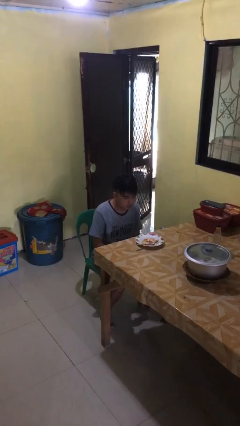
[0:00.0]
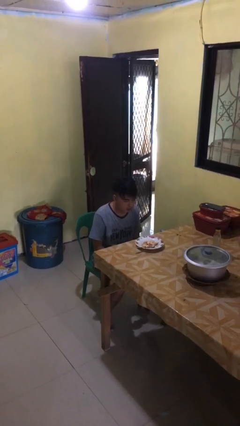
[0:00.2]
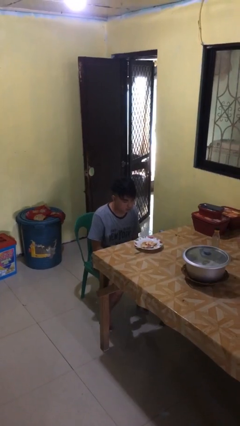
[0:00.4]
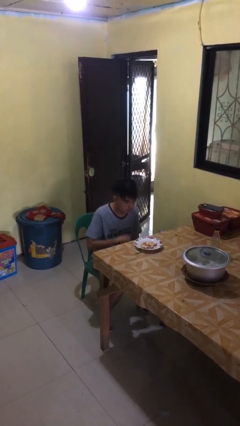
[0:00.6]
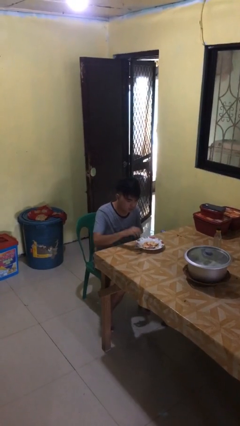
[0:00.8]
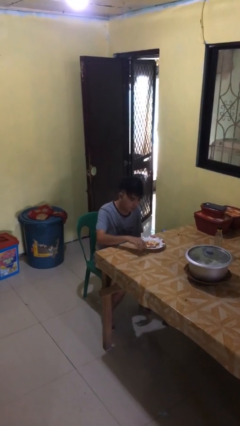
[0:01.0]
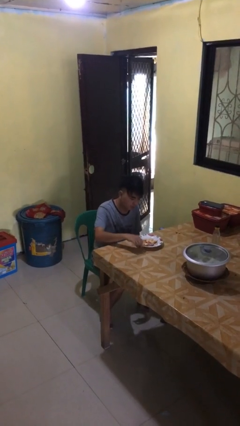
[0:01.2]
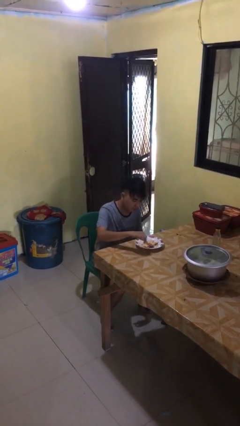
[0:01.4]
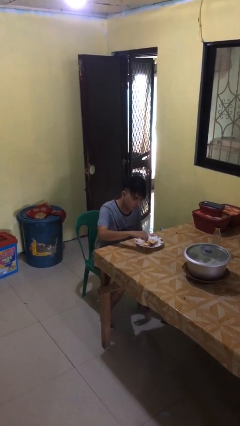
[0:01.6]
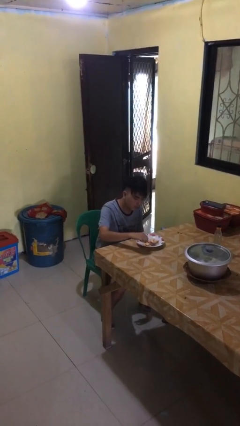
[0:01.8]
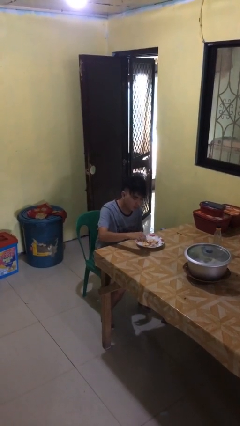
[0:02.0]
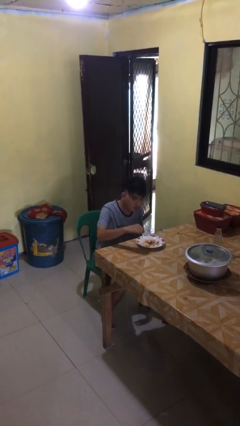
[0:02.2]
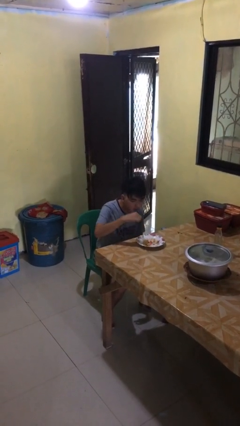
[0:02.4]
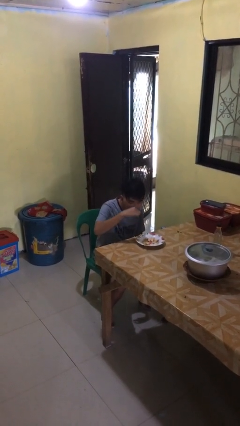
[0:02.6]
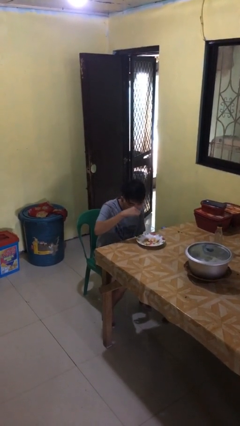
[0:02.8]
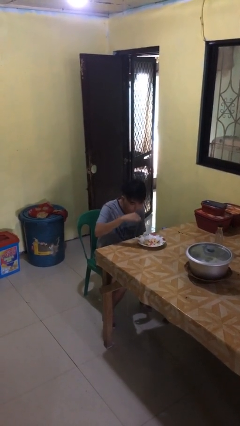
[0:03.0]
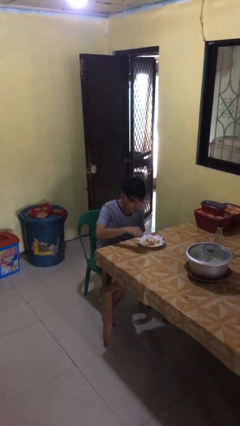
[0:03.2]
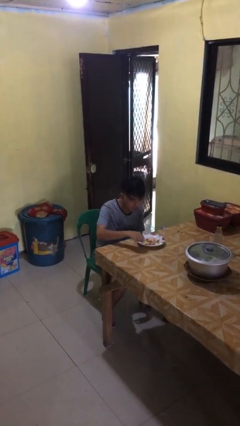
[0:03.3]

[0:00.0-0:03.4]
person eats with utensil

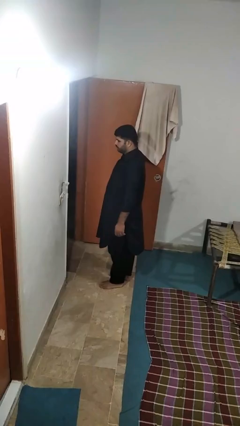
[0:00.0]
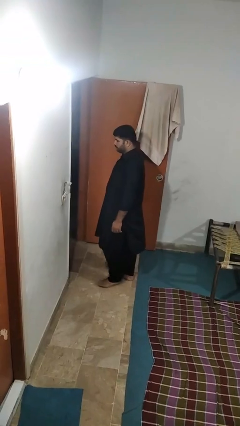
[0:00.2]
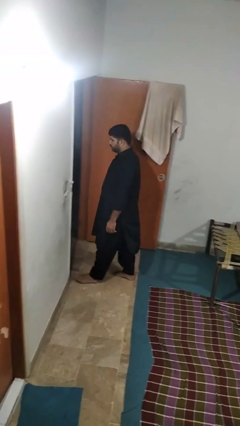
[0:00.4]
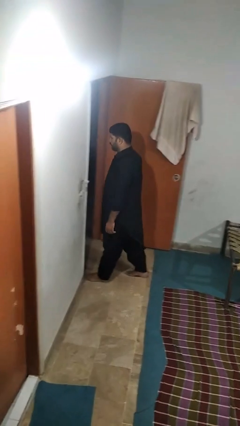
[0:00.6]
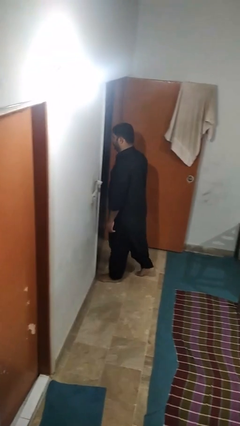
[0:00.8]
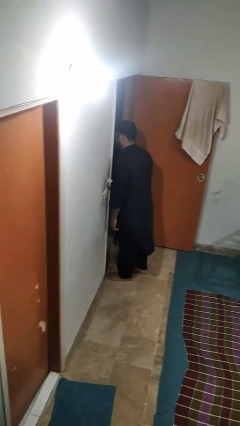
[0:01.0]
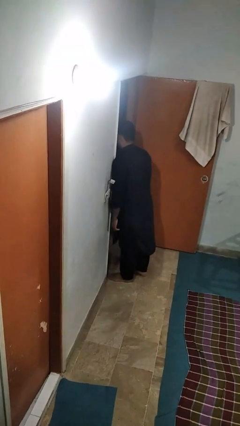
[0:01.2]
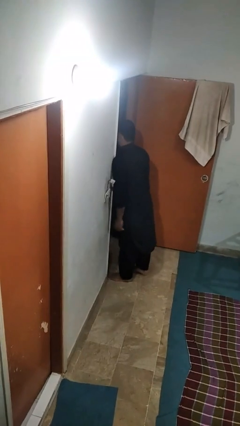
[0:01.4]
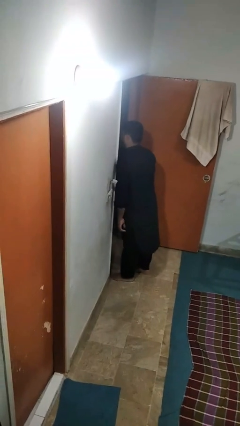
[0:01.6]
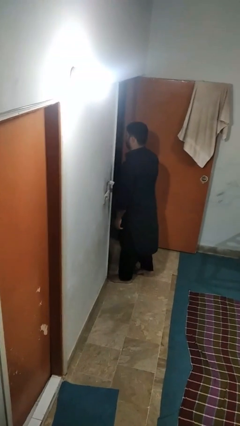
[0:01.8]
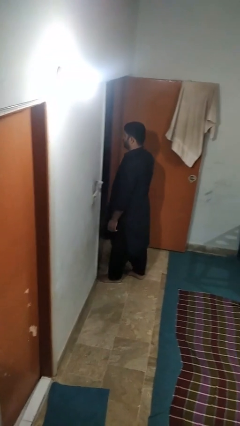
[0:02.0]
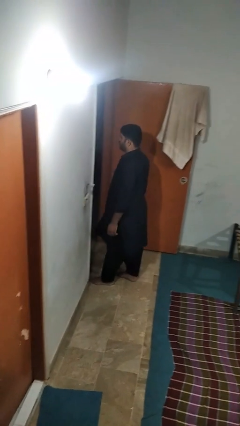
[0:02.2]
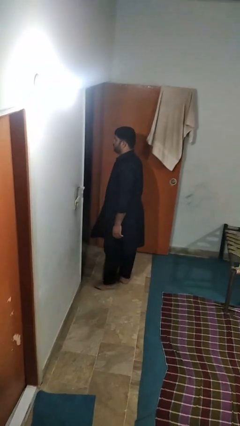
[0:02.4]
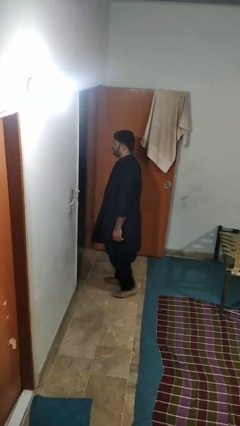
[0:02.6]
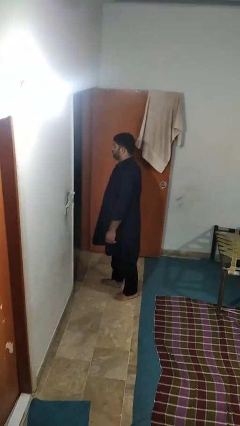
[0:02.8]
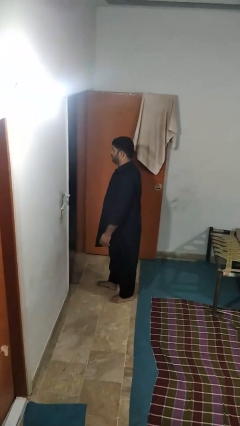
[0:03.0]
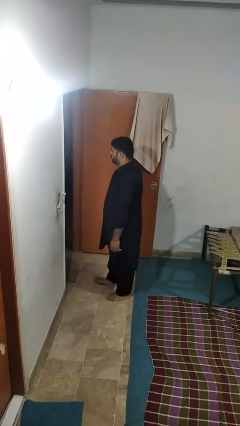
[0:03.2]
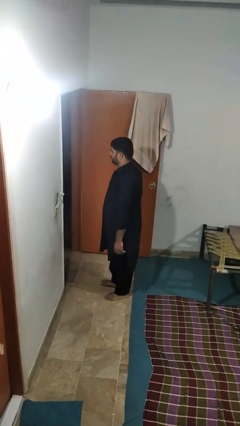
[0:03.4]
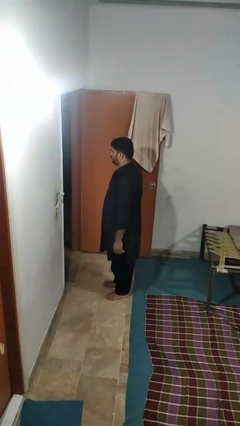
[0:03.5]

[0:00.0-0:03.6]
person bumps into wall

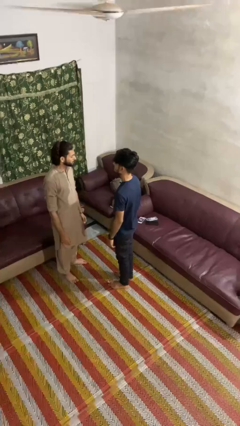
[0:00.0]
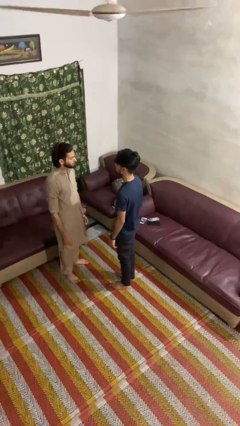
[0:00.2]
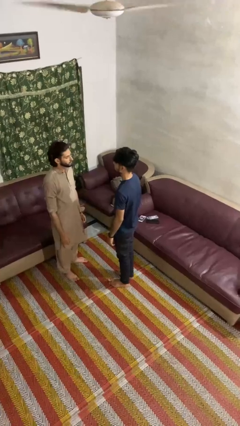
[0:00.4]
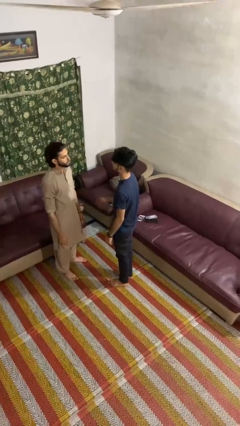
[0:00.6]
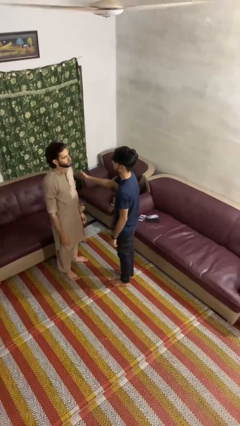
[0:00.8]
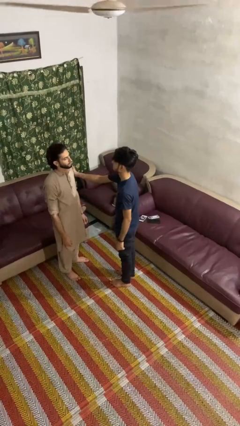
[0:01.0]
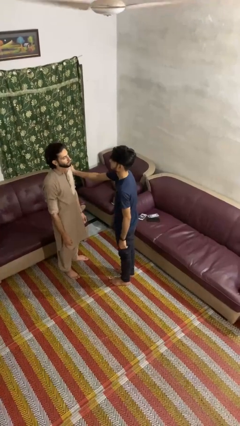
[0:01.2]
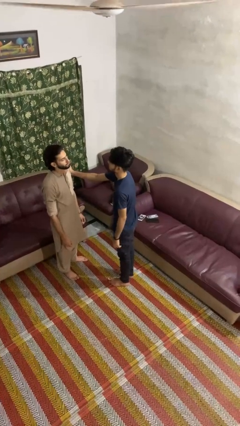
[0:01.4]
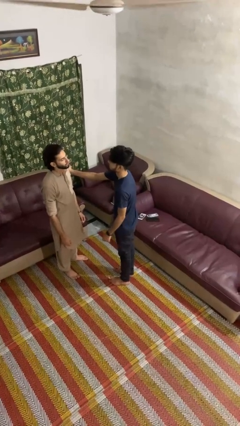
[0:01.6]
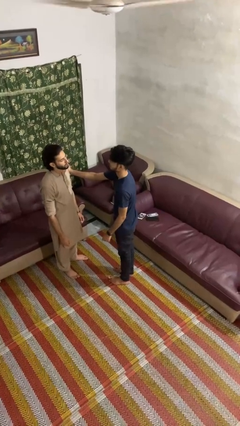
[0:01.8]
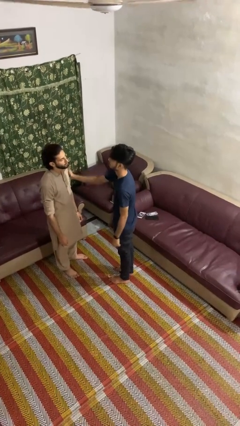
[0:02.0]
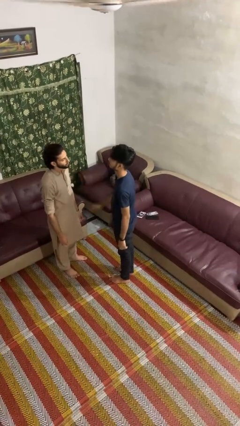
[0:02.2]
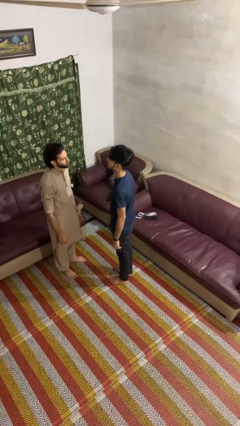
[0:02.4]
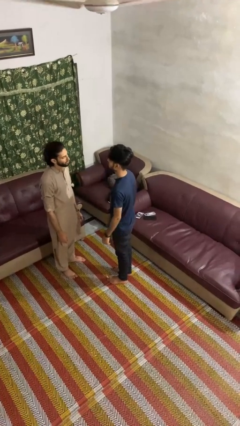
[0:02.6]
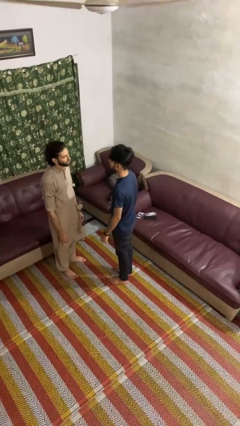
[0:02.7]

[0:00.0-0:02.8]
person grabs person by bicep

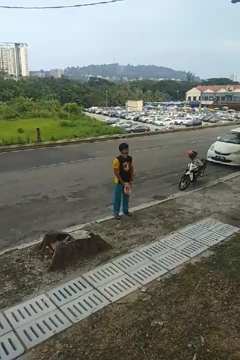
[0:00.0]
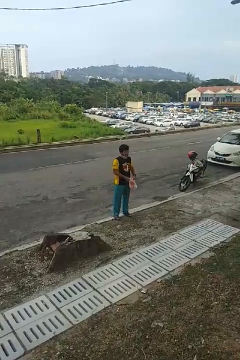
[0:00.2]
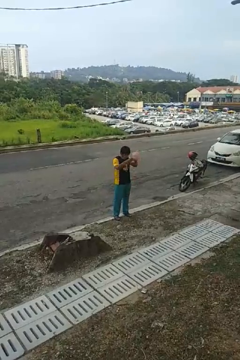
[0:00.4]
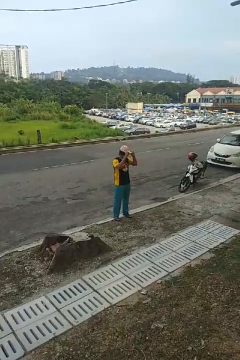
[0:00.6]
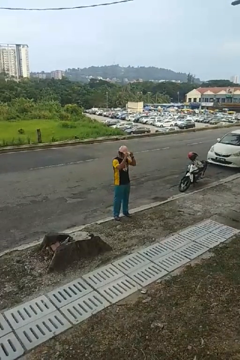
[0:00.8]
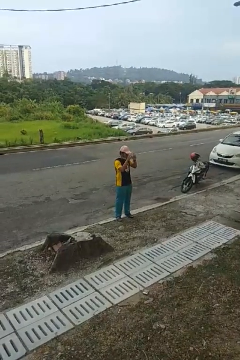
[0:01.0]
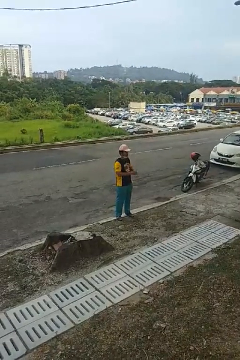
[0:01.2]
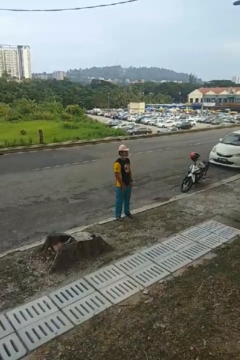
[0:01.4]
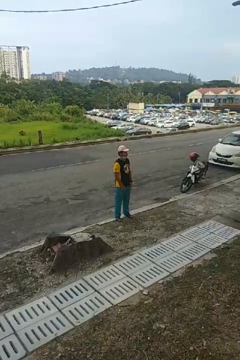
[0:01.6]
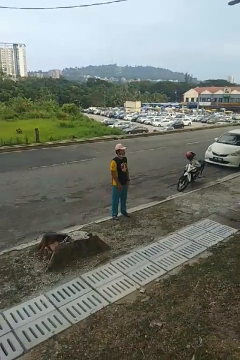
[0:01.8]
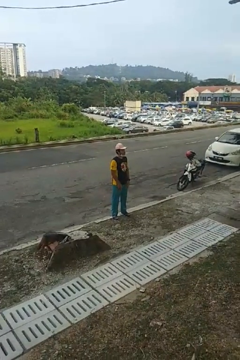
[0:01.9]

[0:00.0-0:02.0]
person puts on hat

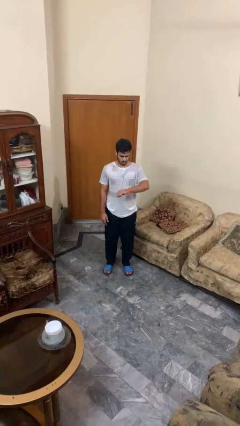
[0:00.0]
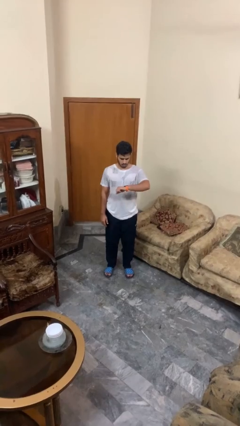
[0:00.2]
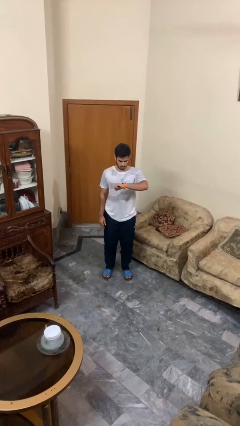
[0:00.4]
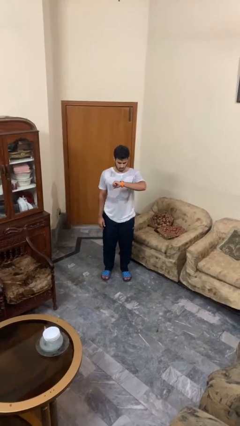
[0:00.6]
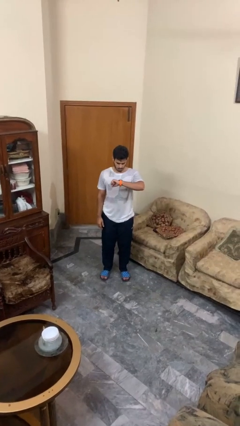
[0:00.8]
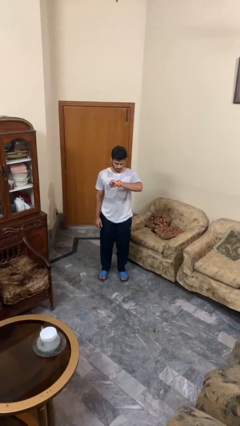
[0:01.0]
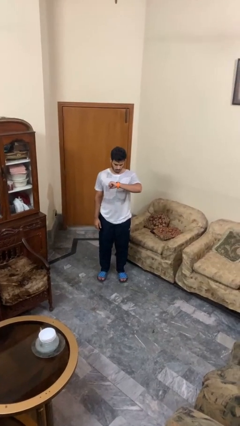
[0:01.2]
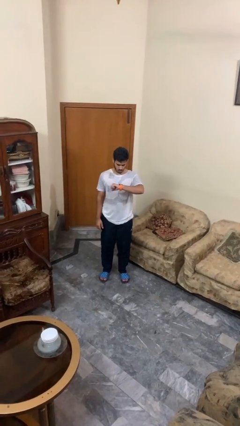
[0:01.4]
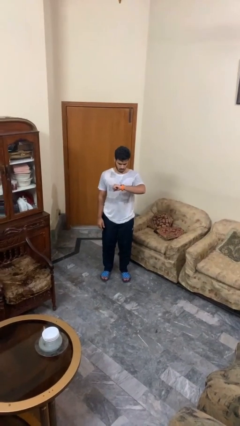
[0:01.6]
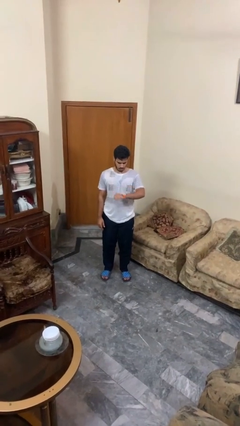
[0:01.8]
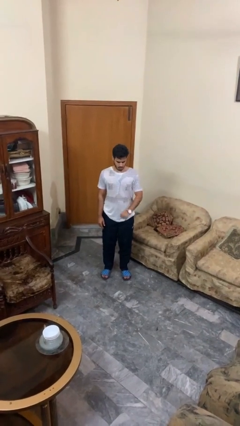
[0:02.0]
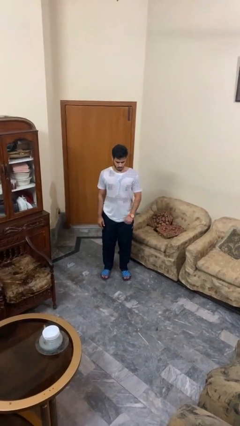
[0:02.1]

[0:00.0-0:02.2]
person looks at wristwatch

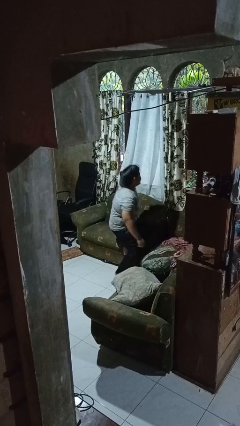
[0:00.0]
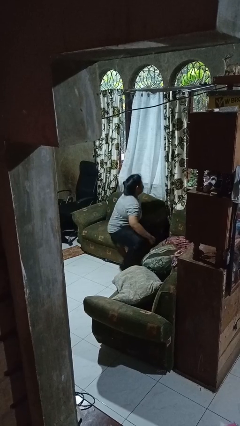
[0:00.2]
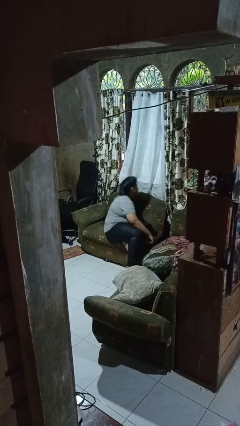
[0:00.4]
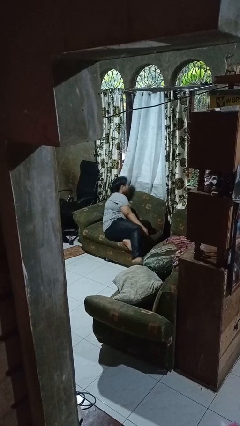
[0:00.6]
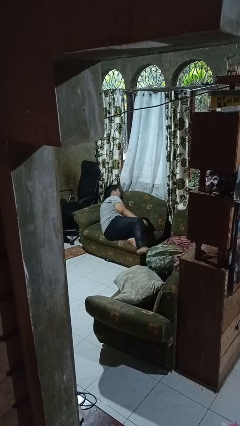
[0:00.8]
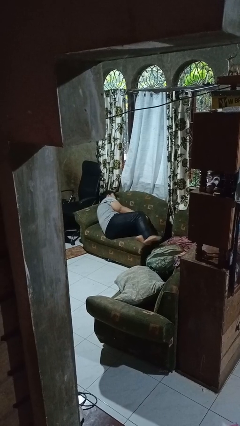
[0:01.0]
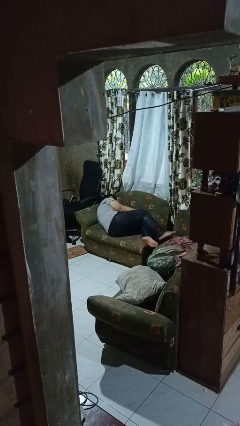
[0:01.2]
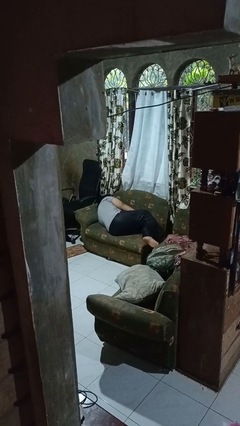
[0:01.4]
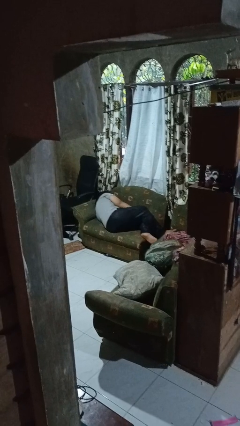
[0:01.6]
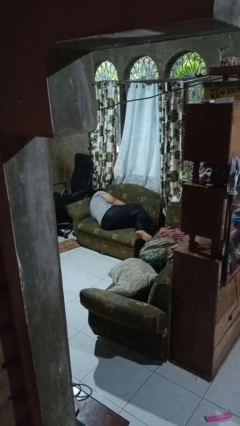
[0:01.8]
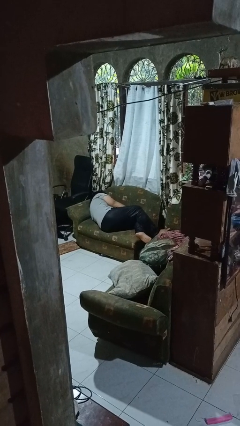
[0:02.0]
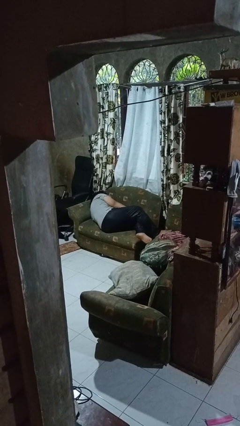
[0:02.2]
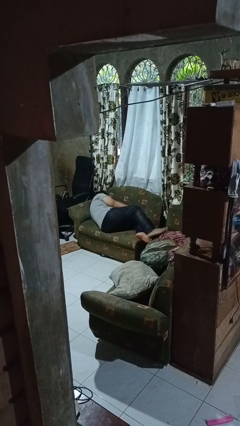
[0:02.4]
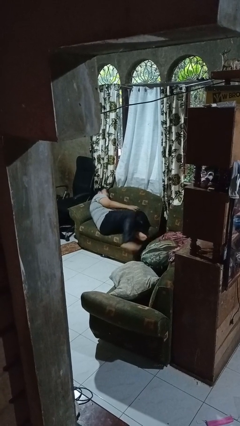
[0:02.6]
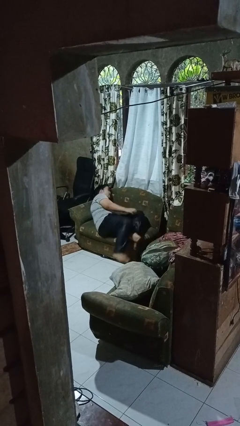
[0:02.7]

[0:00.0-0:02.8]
person lies down on couch

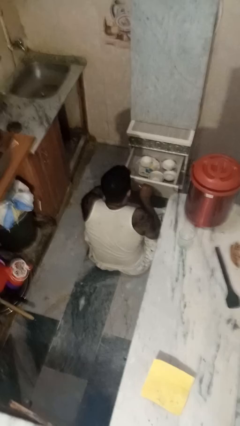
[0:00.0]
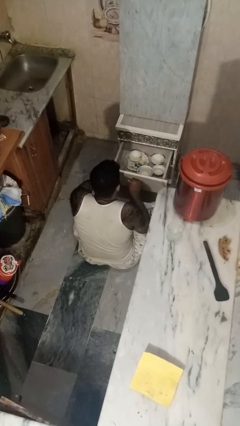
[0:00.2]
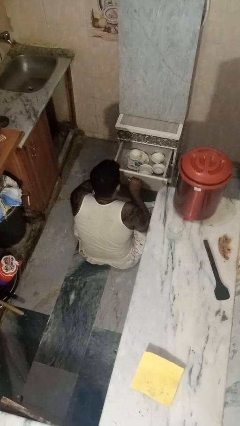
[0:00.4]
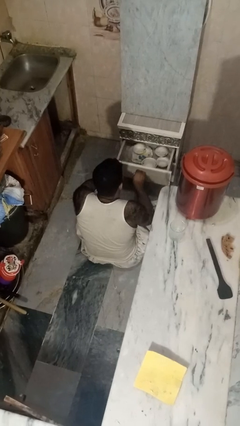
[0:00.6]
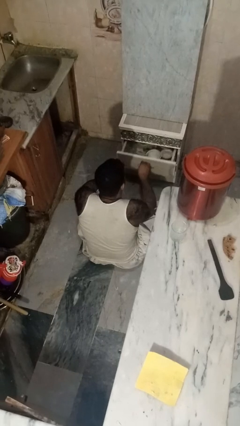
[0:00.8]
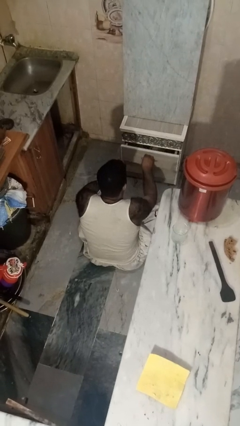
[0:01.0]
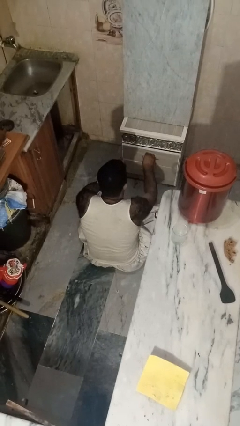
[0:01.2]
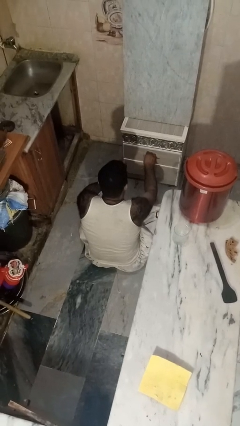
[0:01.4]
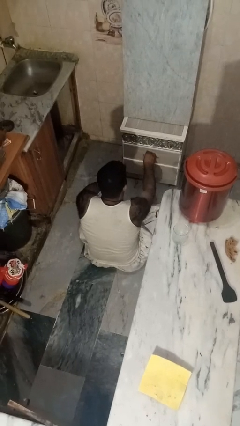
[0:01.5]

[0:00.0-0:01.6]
person closes kitchen drawer
